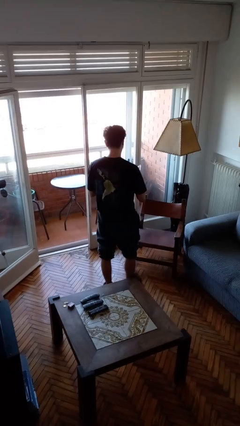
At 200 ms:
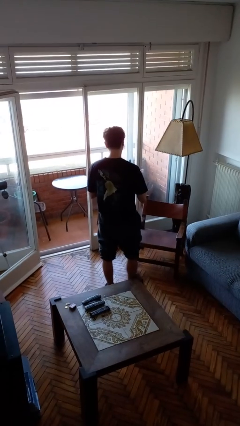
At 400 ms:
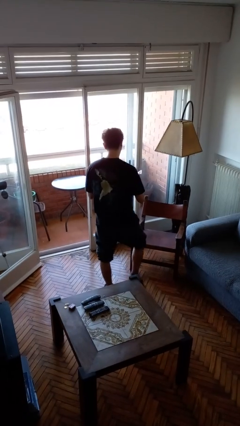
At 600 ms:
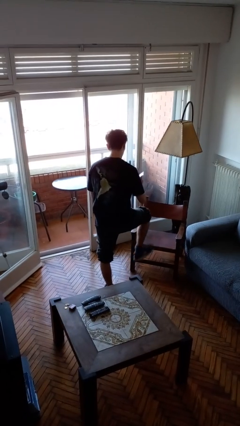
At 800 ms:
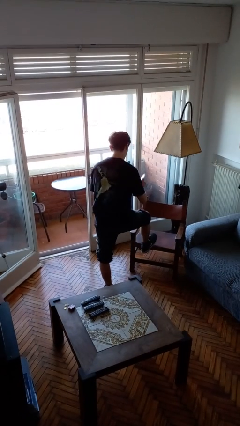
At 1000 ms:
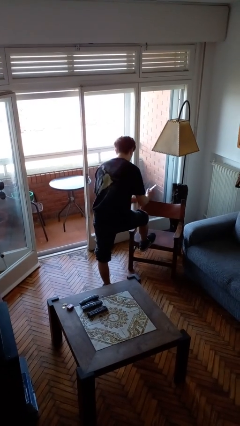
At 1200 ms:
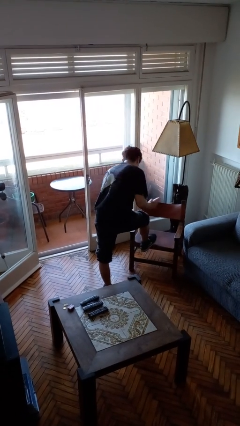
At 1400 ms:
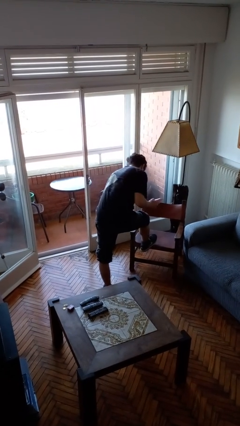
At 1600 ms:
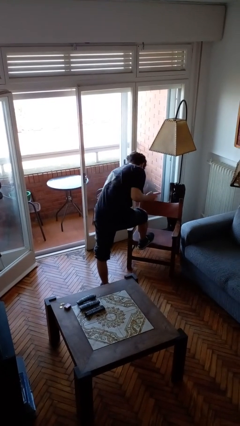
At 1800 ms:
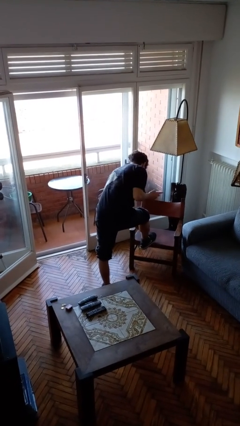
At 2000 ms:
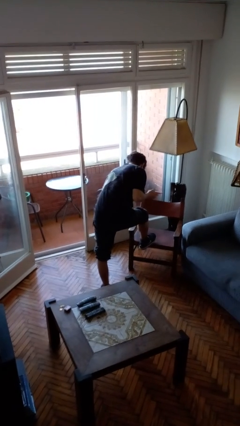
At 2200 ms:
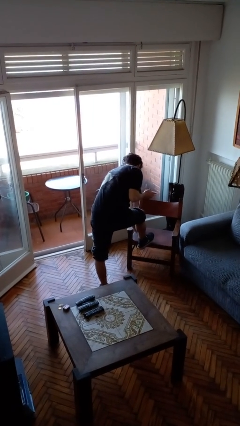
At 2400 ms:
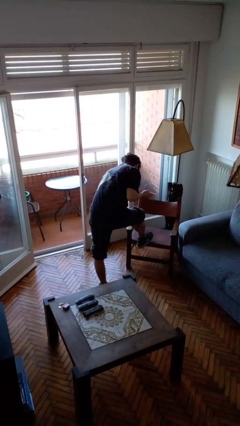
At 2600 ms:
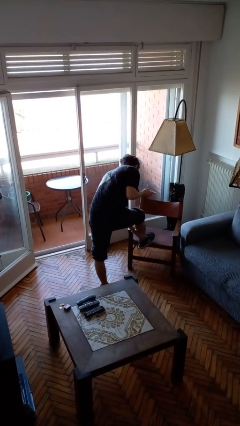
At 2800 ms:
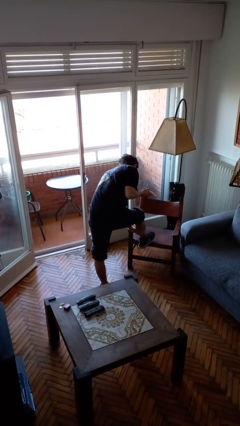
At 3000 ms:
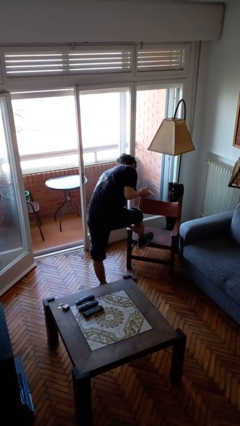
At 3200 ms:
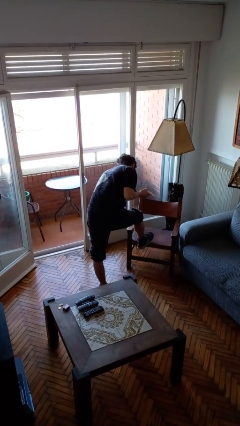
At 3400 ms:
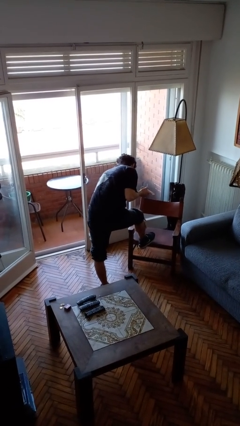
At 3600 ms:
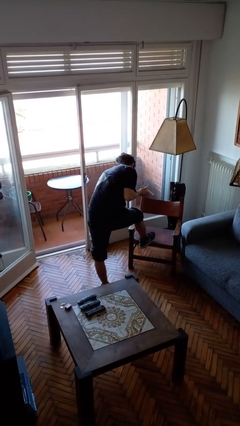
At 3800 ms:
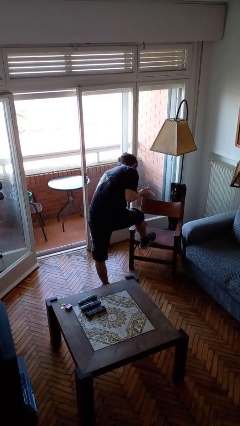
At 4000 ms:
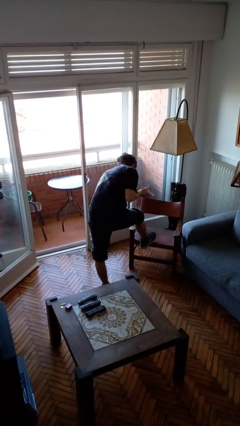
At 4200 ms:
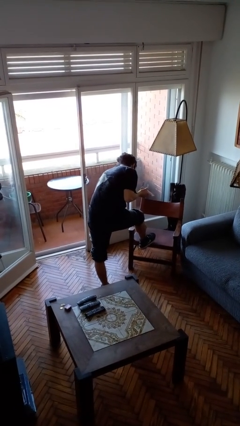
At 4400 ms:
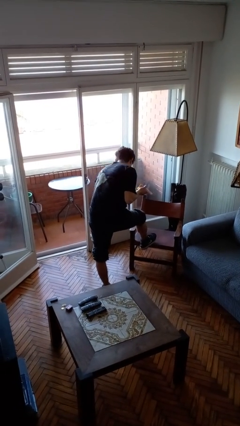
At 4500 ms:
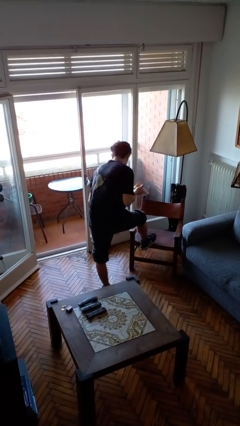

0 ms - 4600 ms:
person applies sunscreen

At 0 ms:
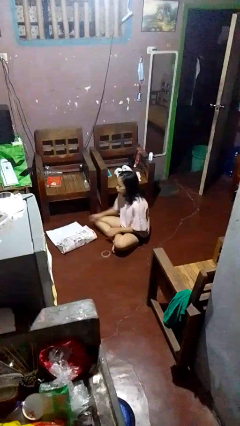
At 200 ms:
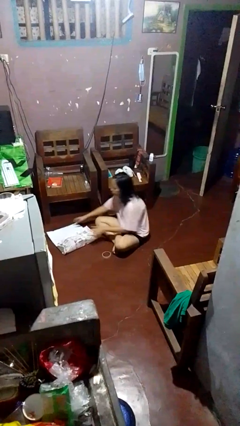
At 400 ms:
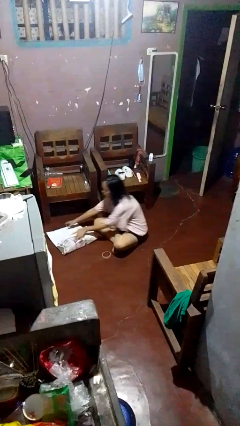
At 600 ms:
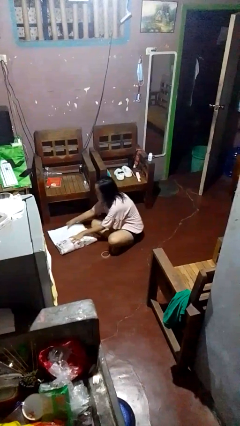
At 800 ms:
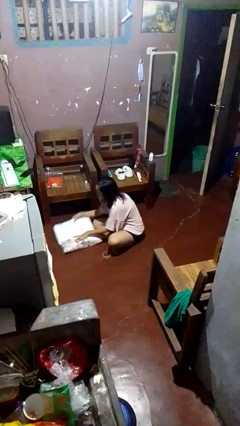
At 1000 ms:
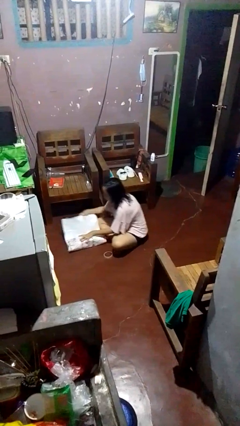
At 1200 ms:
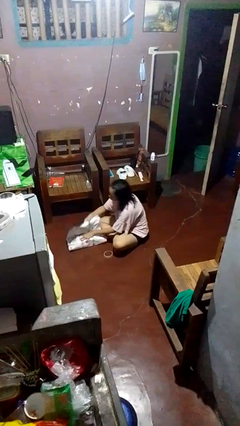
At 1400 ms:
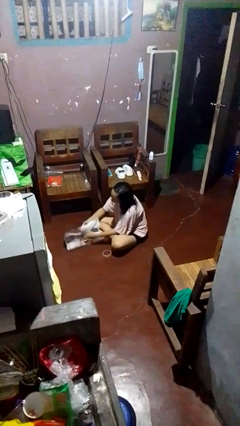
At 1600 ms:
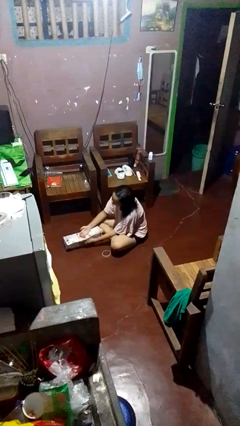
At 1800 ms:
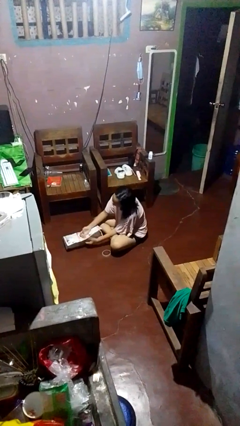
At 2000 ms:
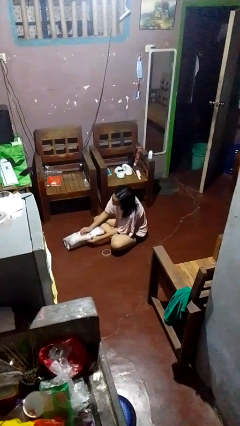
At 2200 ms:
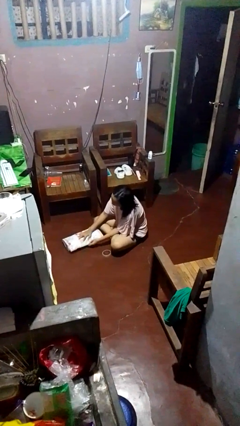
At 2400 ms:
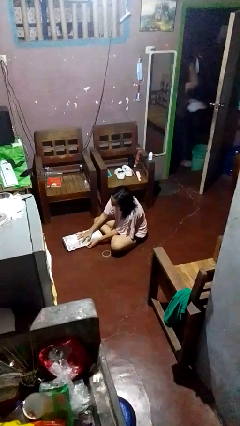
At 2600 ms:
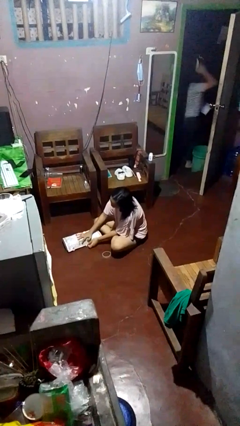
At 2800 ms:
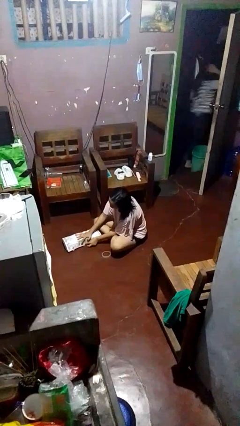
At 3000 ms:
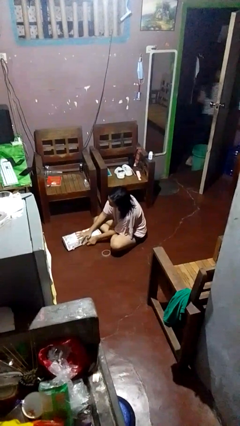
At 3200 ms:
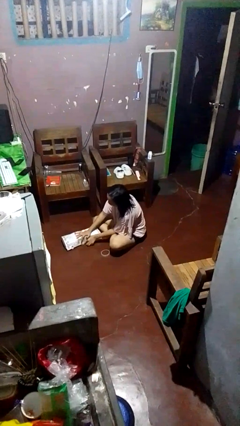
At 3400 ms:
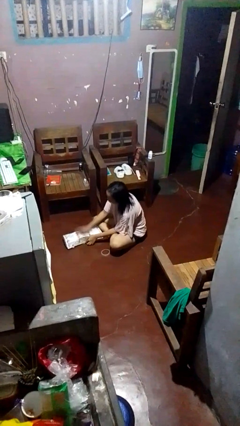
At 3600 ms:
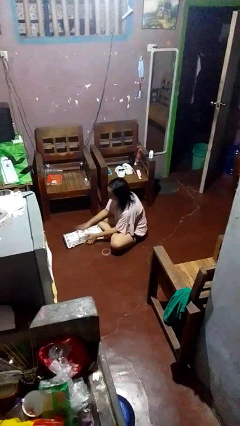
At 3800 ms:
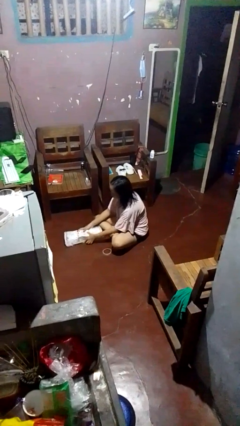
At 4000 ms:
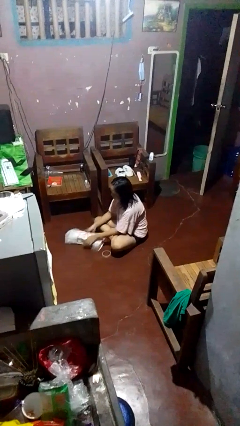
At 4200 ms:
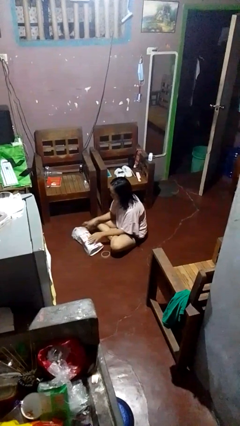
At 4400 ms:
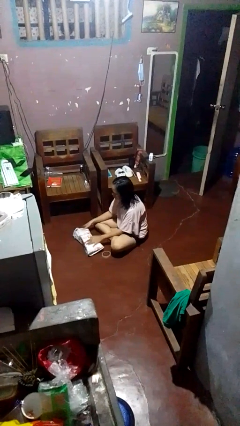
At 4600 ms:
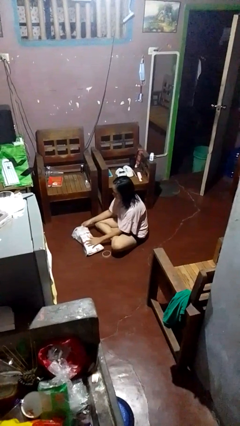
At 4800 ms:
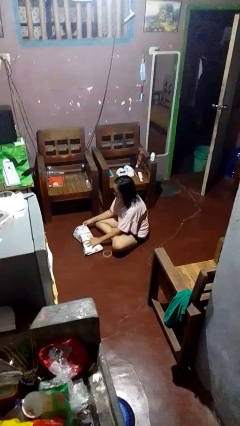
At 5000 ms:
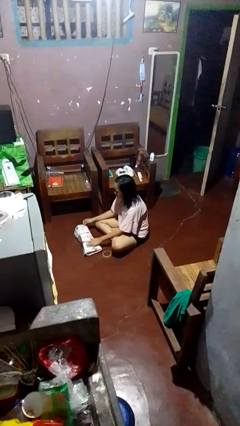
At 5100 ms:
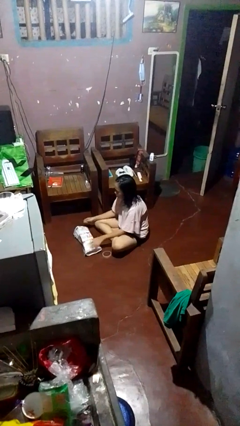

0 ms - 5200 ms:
person wraps box

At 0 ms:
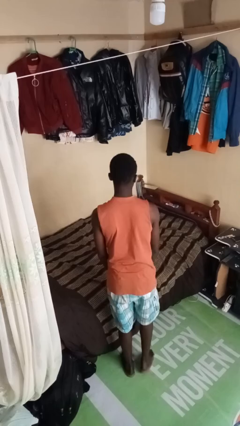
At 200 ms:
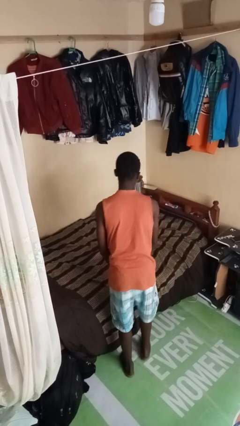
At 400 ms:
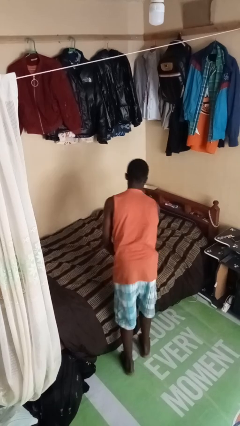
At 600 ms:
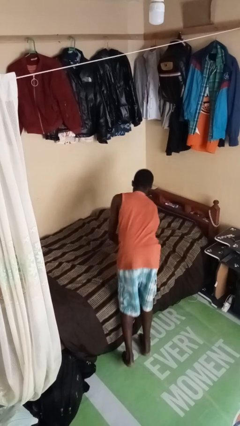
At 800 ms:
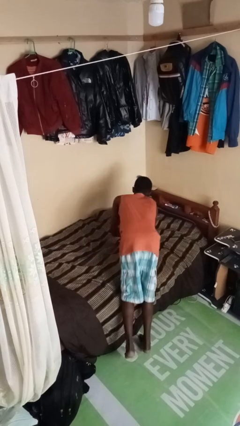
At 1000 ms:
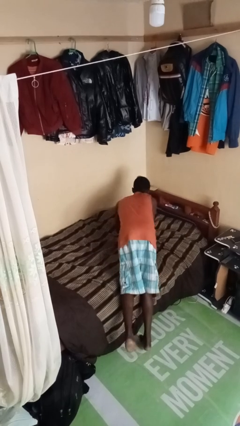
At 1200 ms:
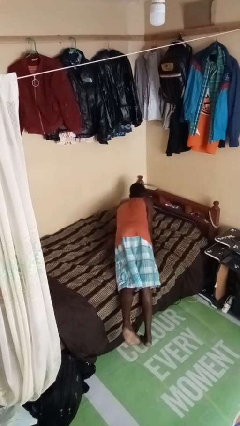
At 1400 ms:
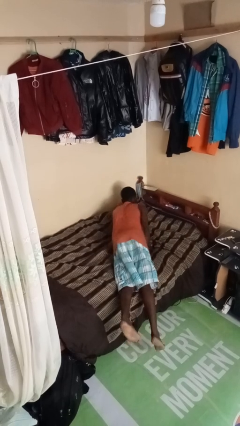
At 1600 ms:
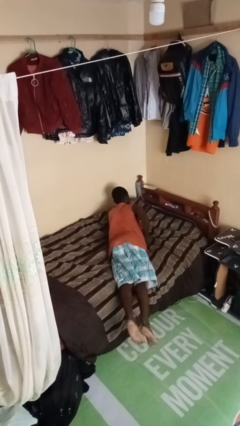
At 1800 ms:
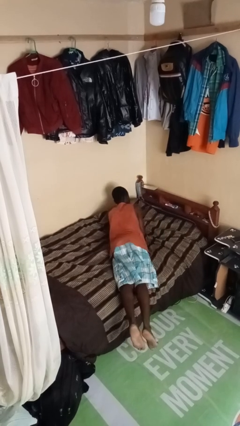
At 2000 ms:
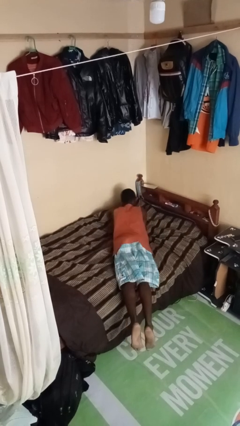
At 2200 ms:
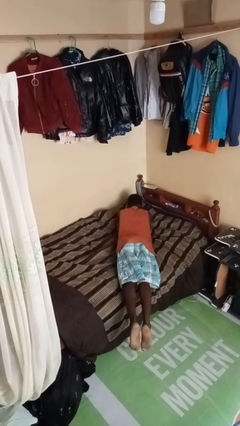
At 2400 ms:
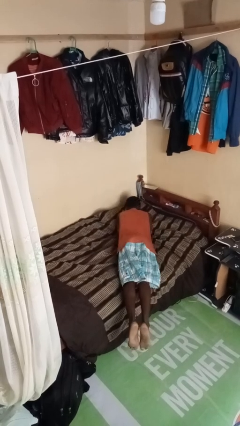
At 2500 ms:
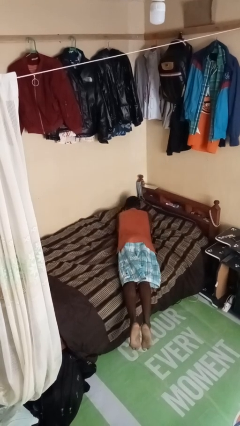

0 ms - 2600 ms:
person lies down on bed

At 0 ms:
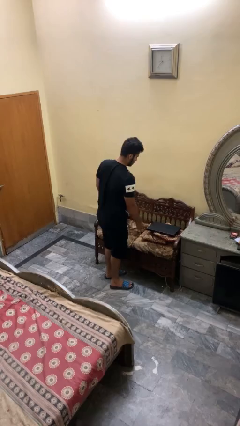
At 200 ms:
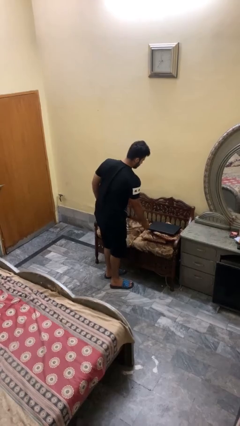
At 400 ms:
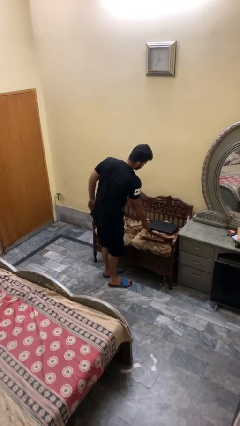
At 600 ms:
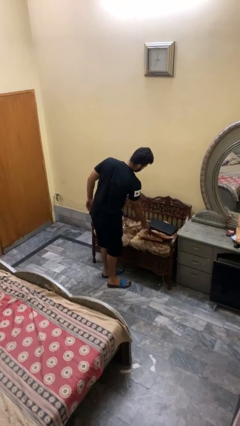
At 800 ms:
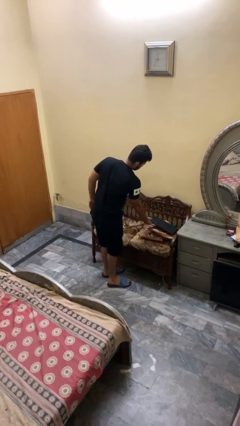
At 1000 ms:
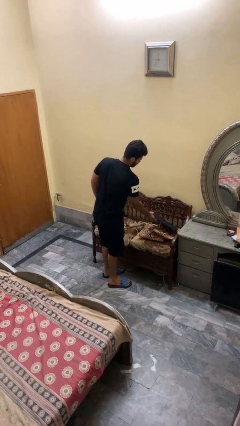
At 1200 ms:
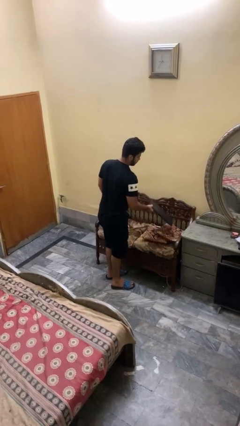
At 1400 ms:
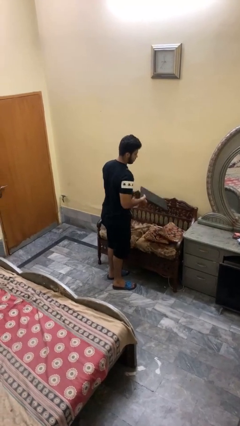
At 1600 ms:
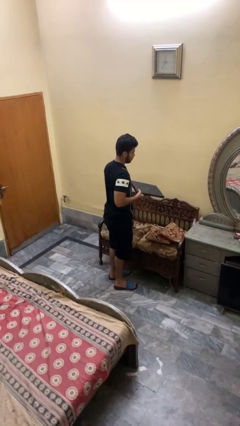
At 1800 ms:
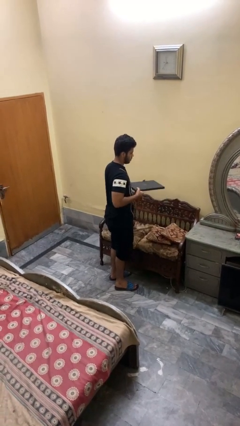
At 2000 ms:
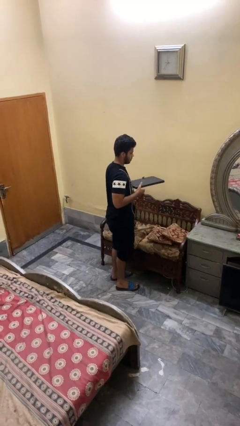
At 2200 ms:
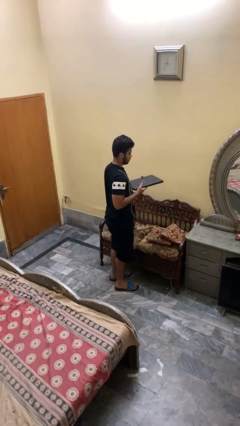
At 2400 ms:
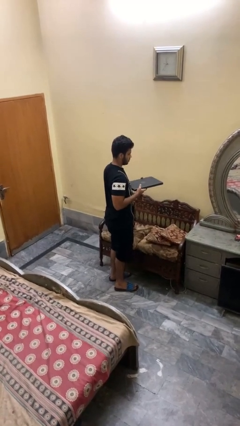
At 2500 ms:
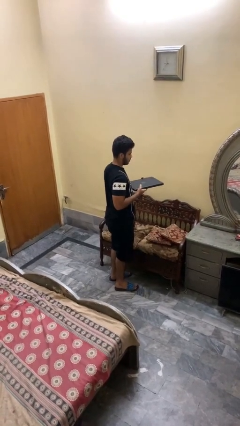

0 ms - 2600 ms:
person picks up object from couch

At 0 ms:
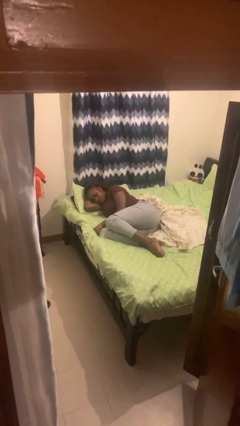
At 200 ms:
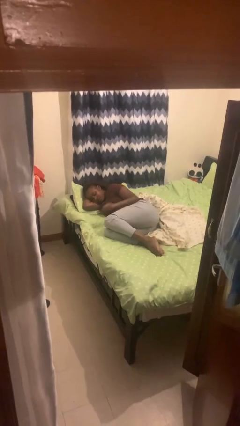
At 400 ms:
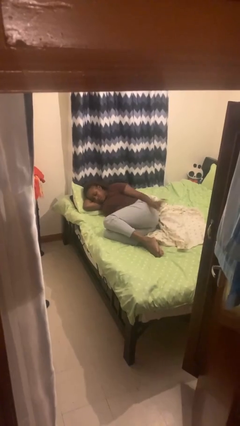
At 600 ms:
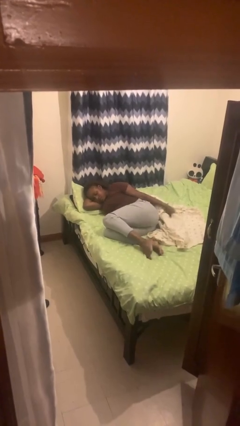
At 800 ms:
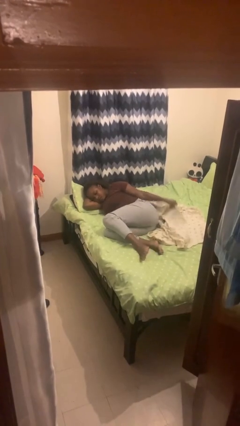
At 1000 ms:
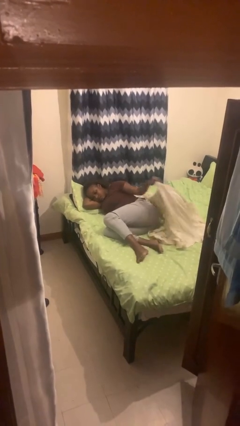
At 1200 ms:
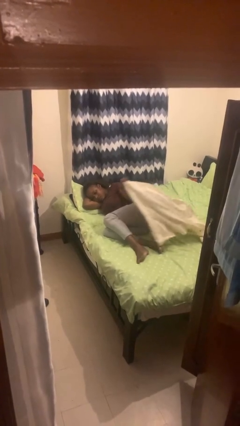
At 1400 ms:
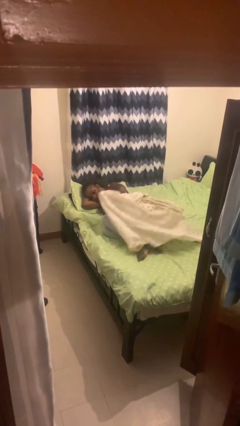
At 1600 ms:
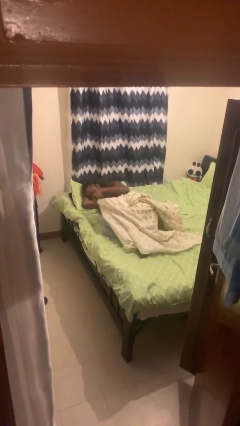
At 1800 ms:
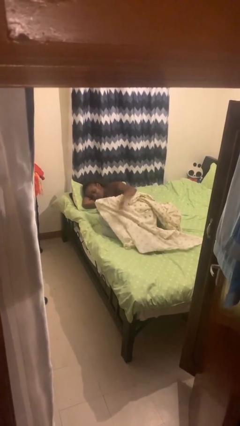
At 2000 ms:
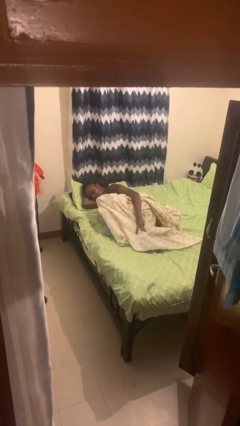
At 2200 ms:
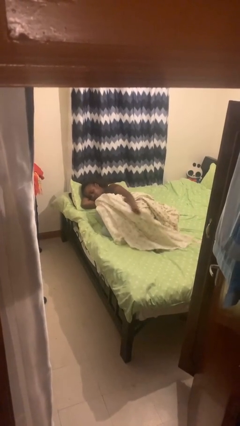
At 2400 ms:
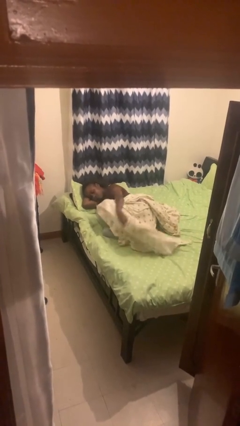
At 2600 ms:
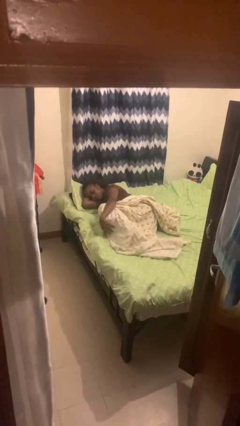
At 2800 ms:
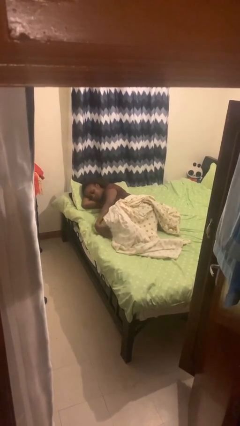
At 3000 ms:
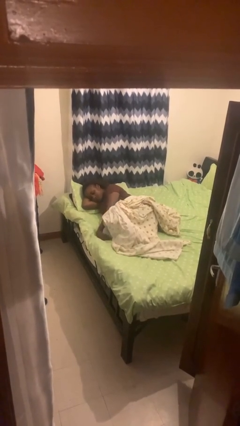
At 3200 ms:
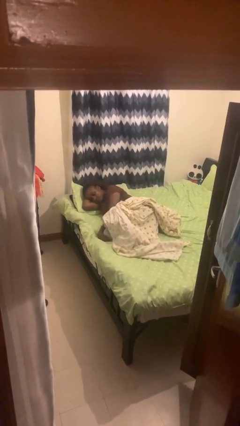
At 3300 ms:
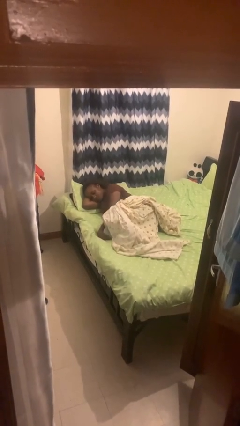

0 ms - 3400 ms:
person covers with bedsheets
